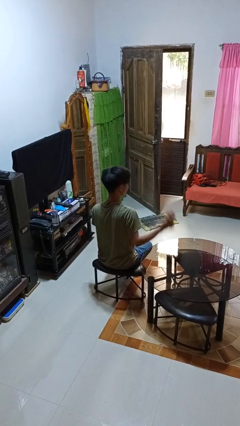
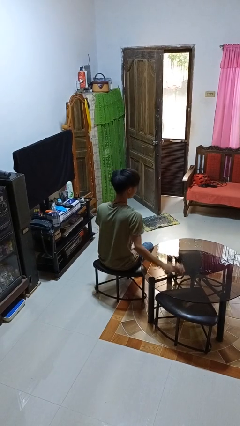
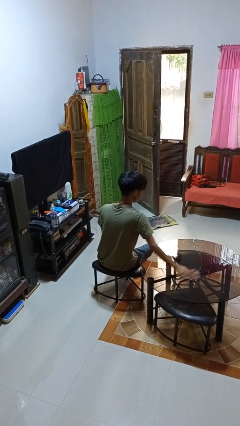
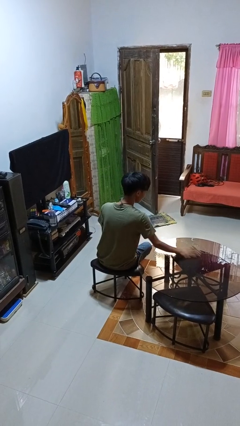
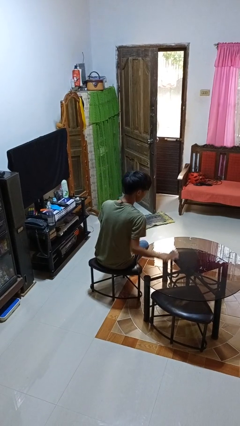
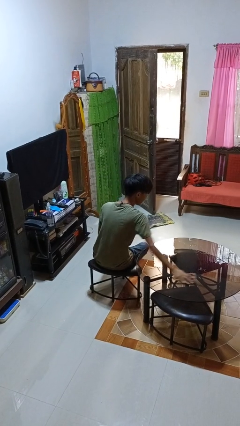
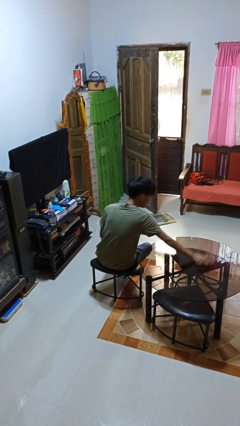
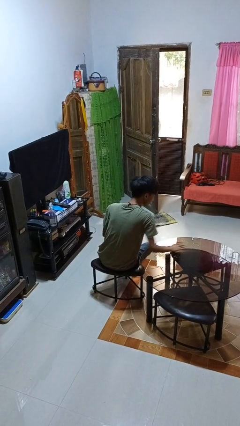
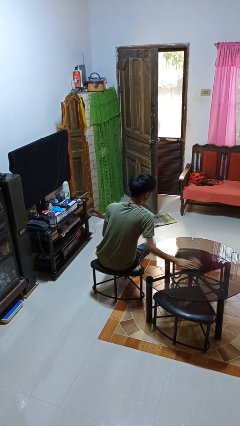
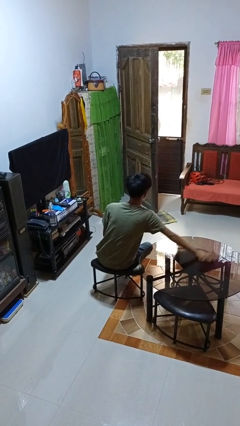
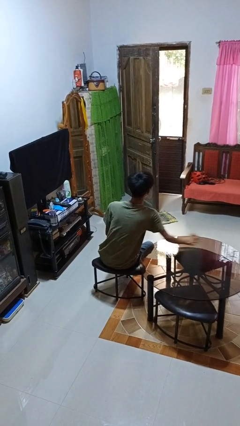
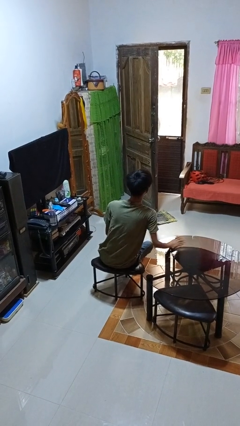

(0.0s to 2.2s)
person cleans table with rag

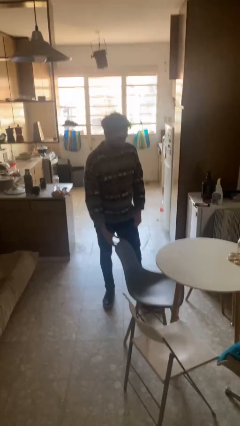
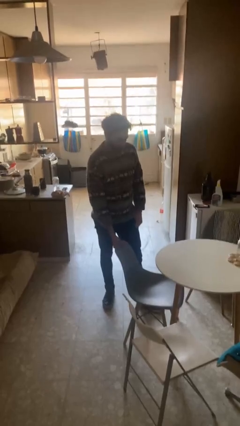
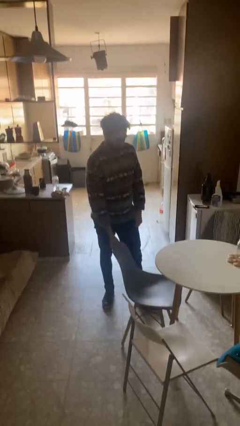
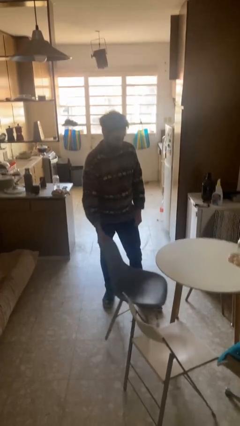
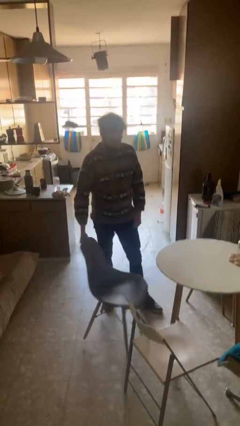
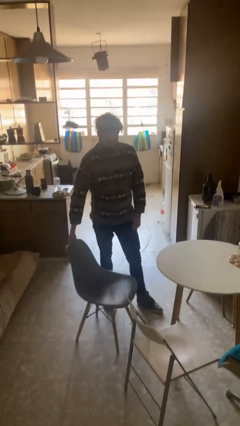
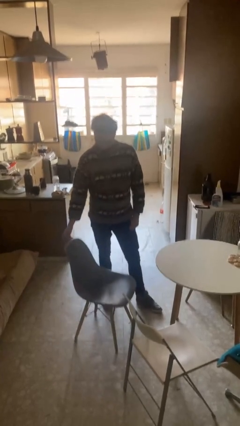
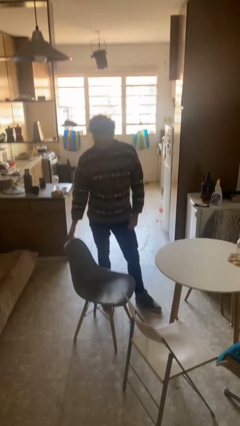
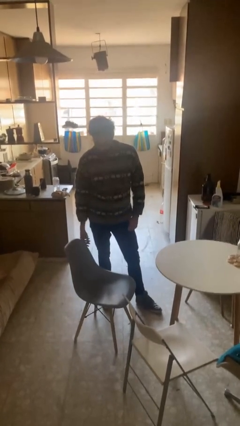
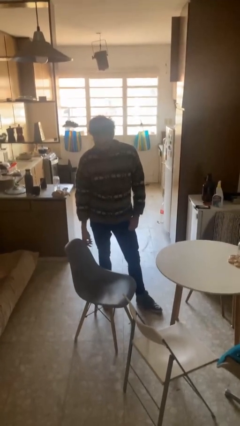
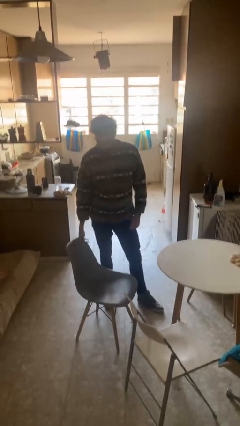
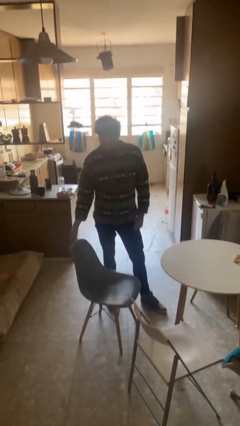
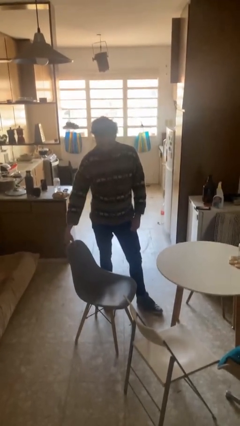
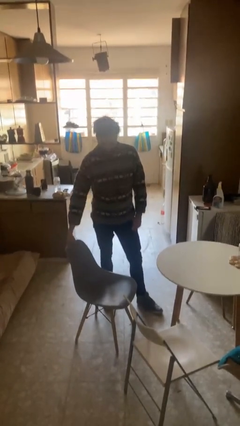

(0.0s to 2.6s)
person pulls out chair

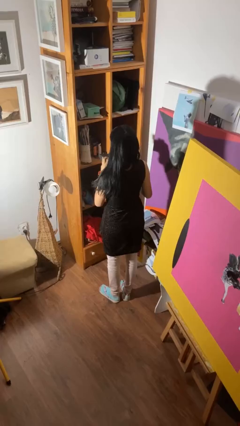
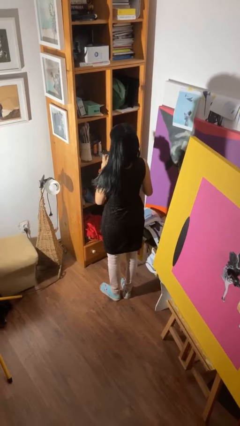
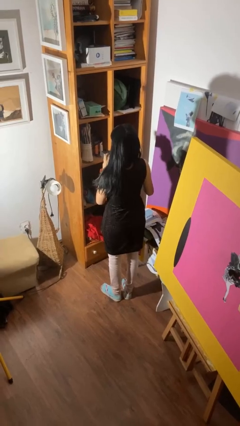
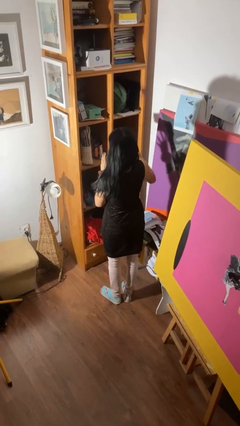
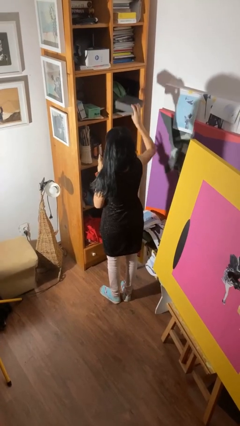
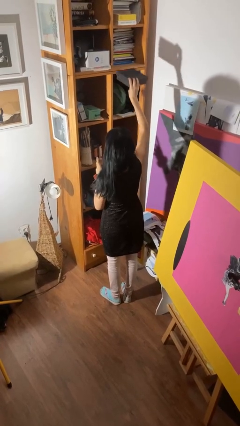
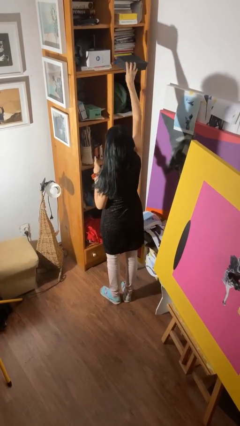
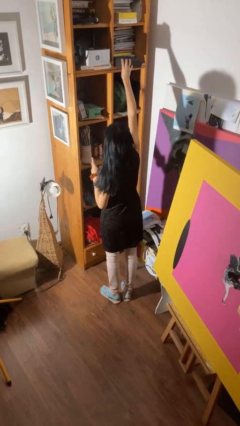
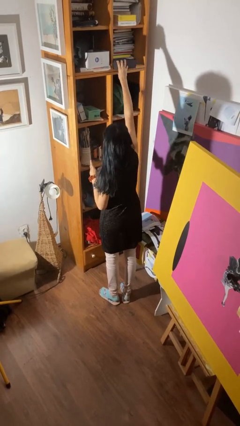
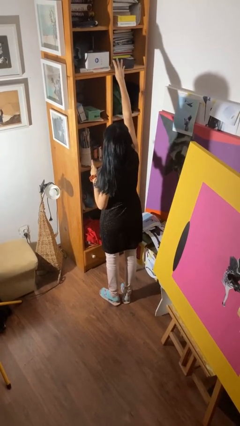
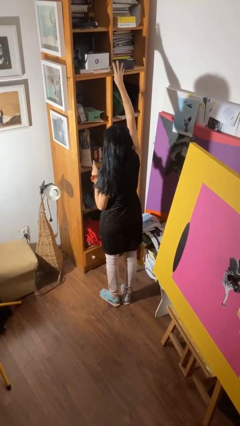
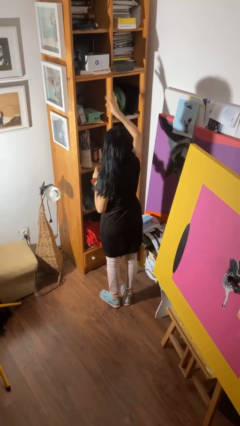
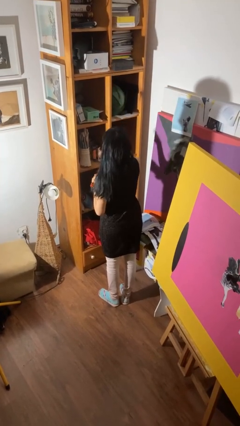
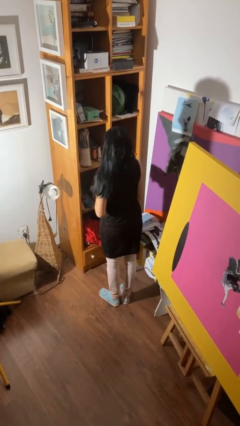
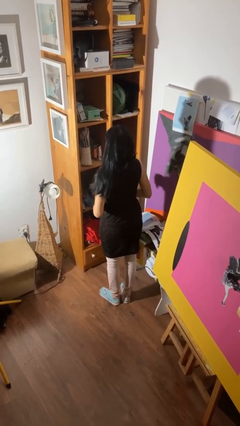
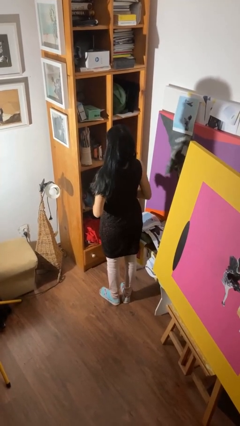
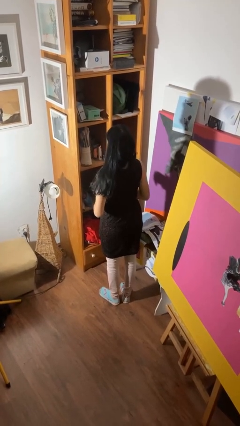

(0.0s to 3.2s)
person puts down object on shelf

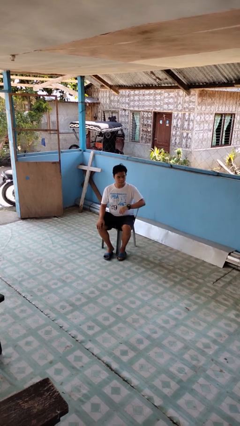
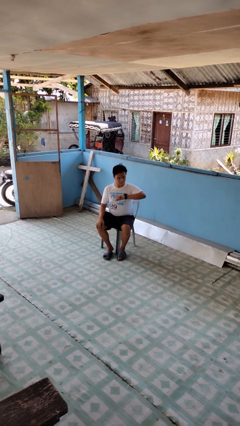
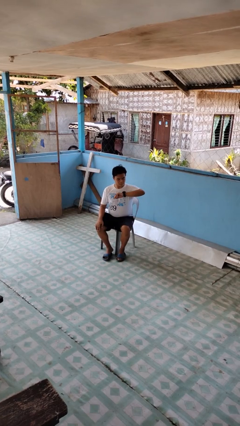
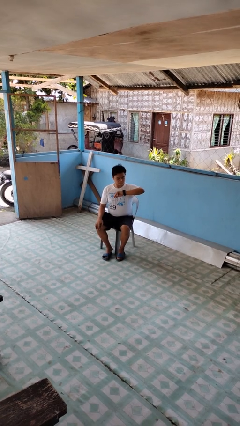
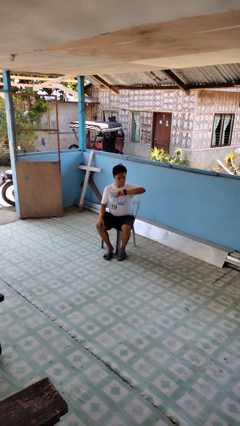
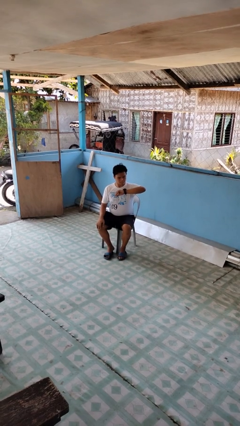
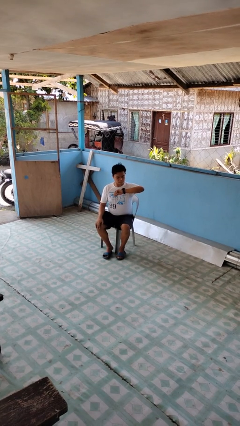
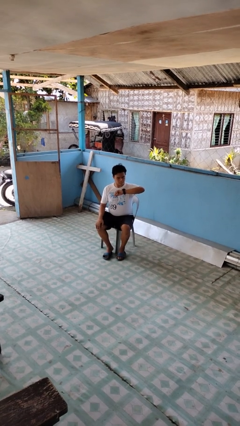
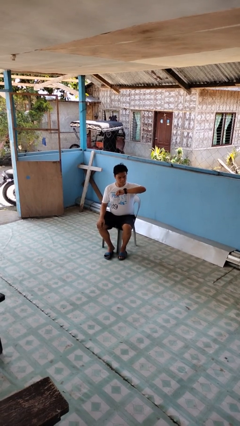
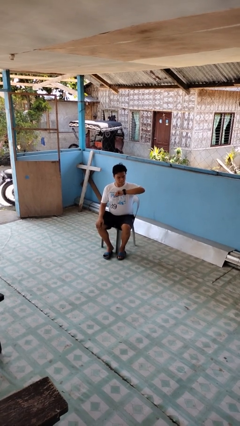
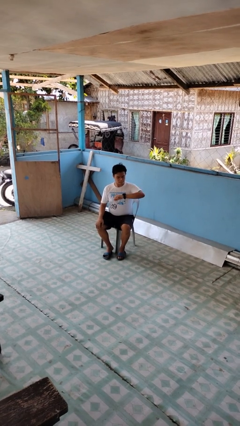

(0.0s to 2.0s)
person looks at wristwatch

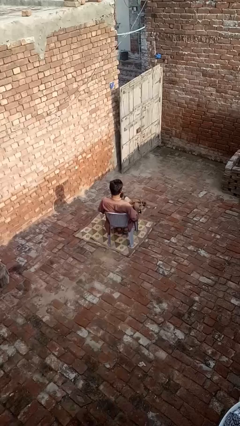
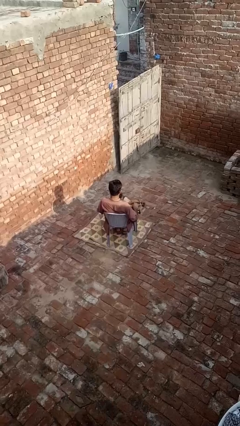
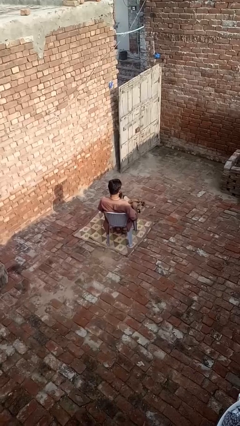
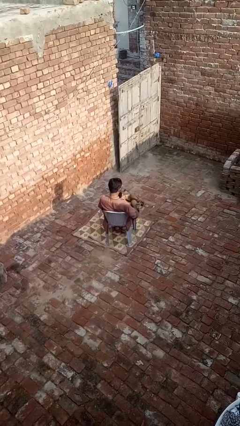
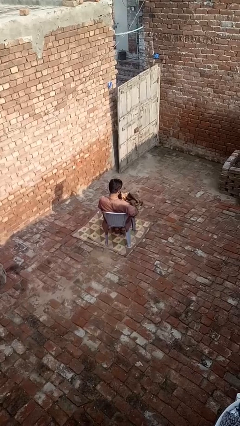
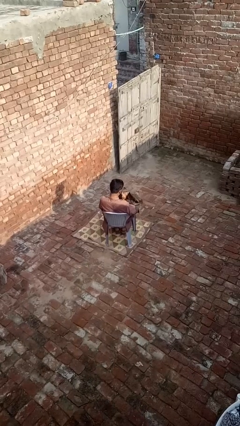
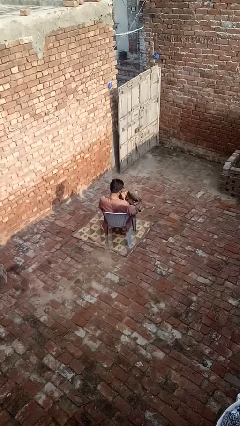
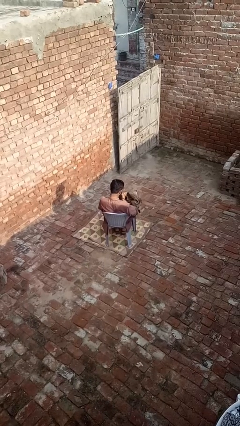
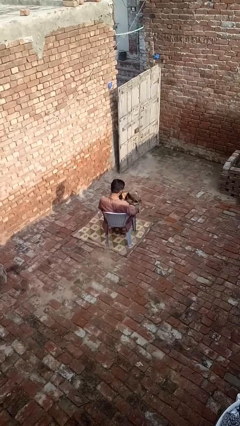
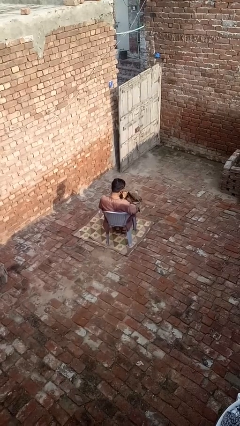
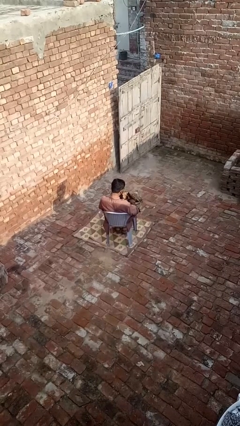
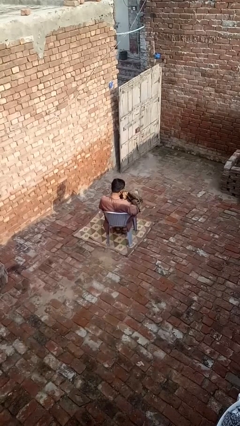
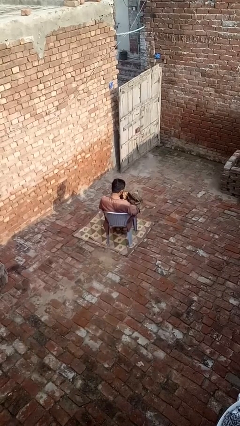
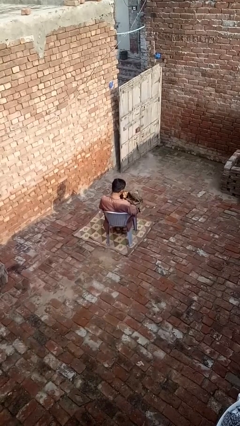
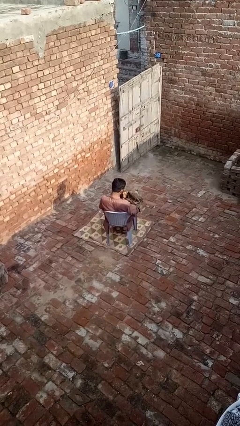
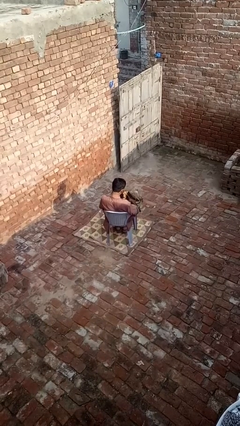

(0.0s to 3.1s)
person searches in purse

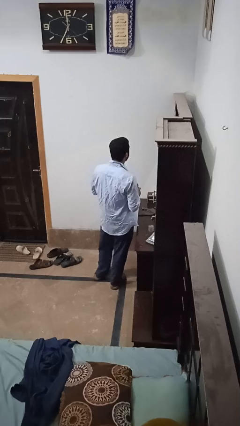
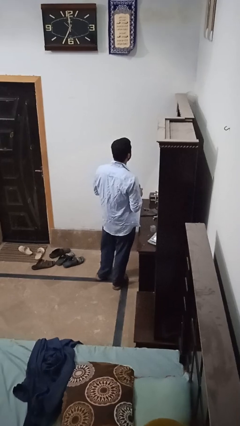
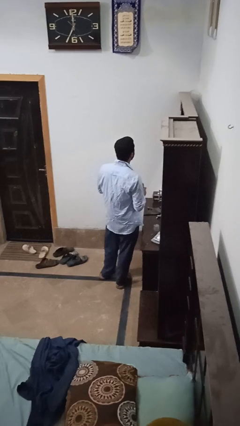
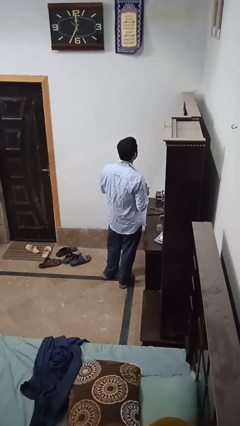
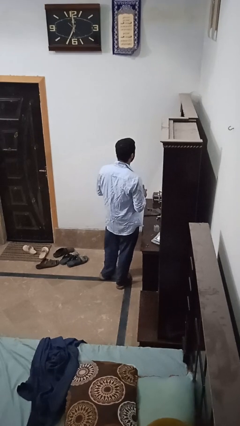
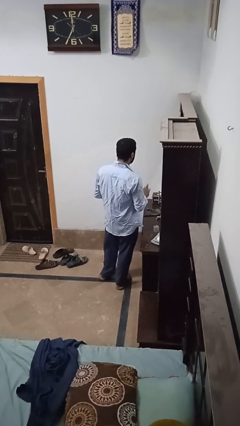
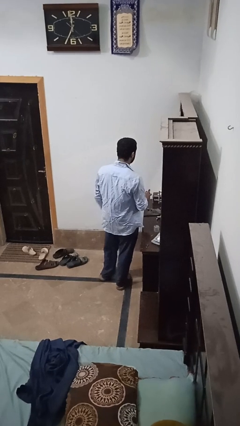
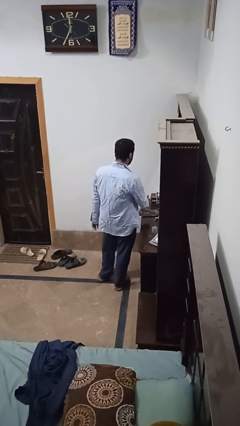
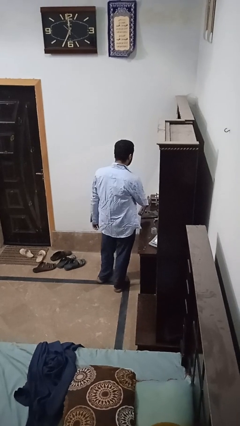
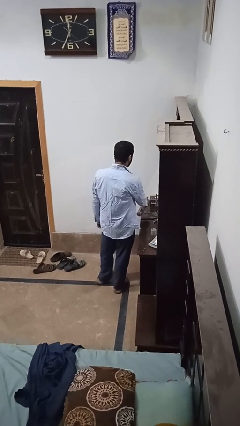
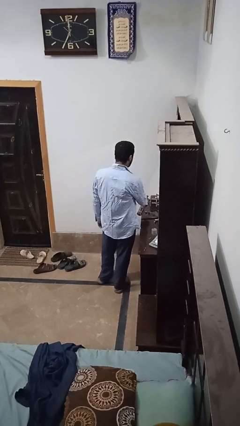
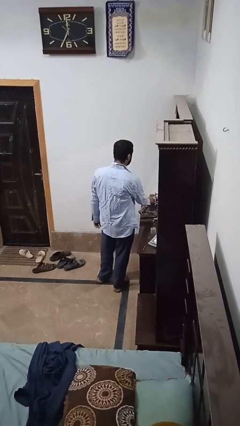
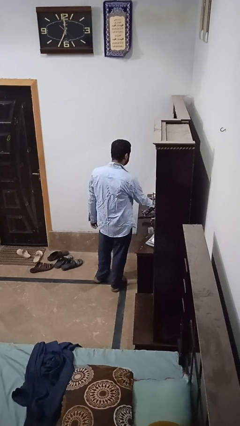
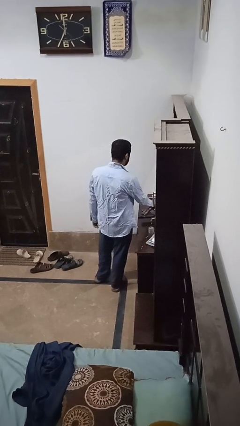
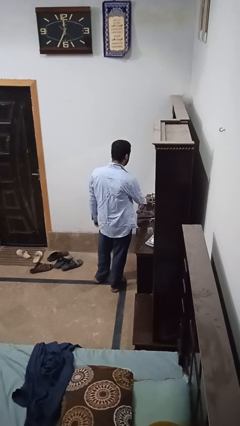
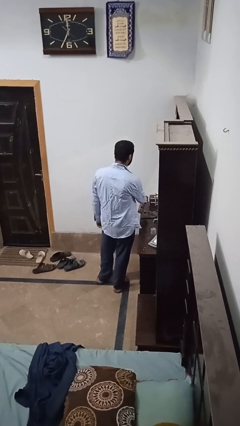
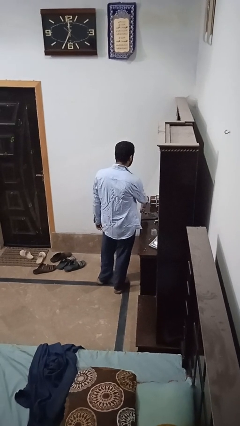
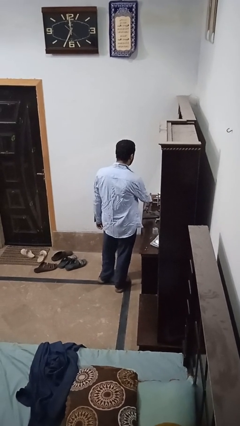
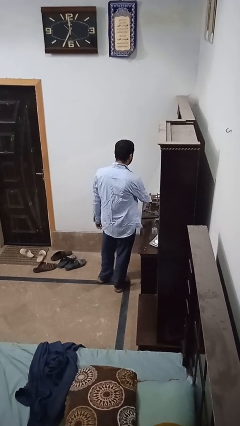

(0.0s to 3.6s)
person sprays from bottle

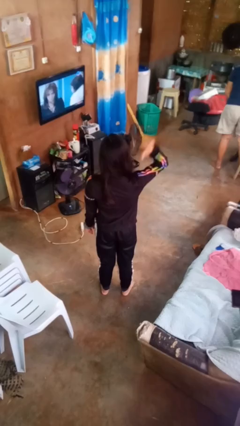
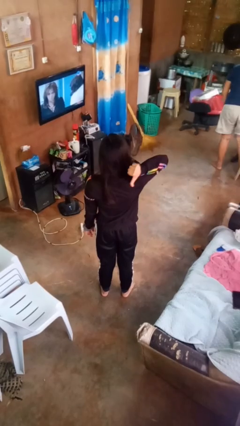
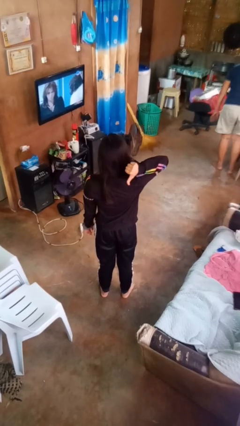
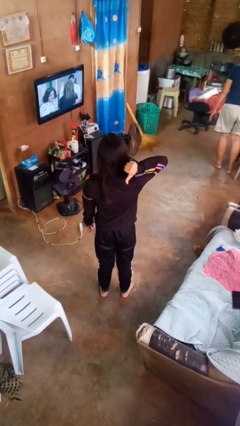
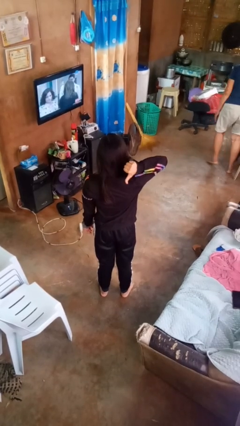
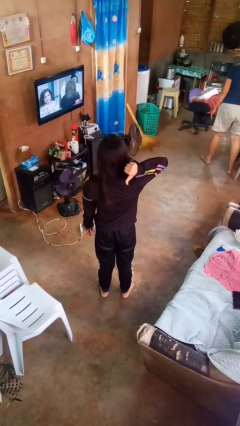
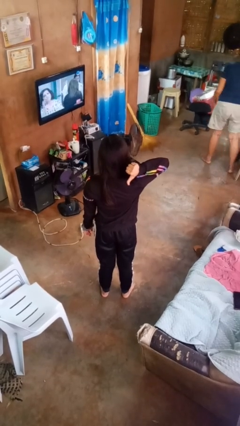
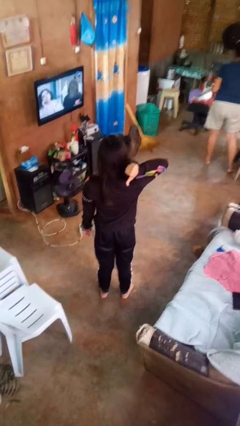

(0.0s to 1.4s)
person gestures behind me
